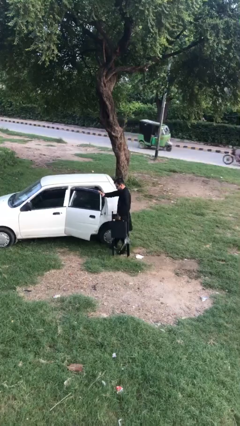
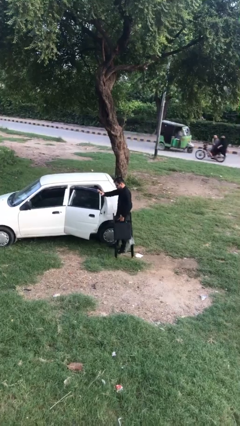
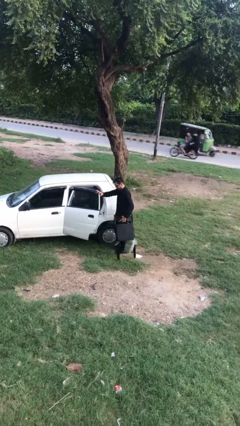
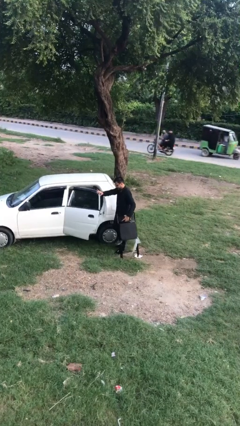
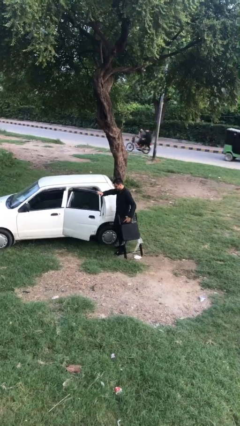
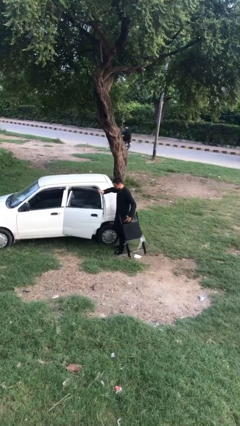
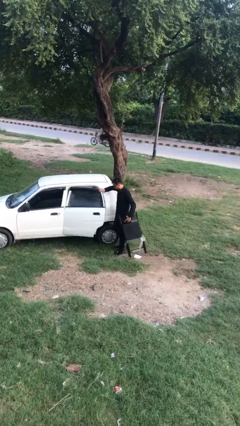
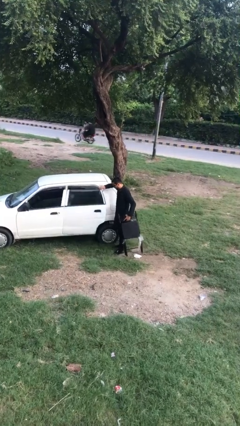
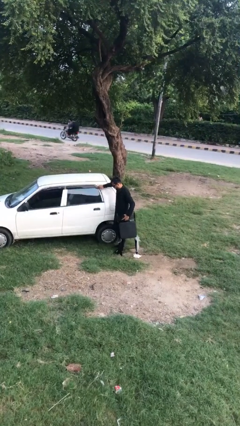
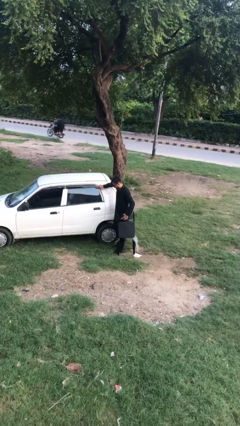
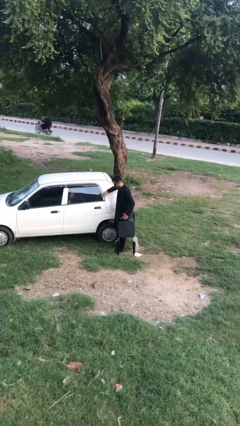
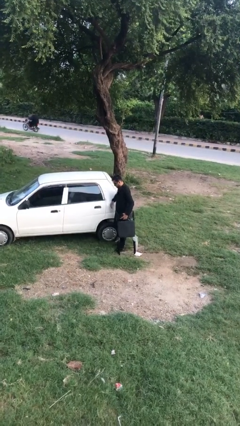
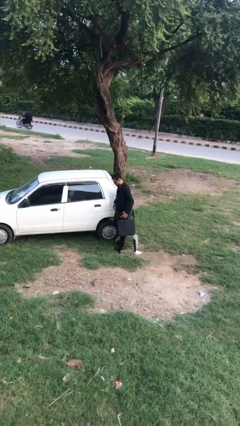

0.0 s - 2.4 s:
person closes car door

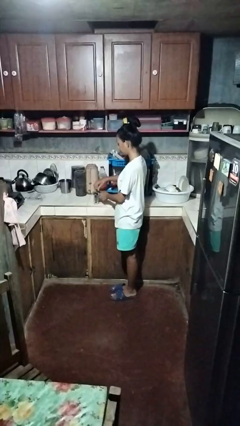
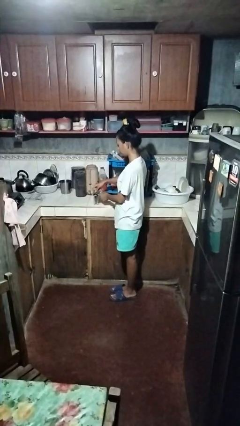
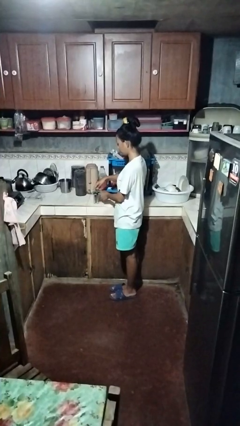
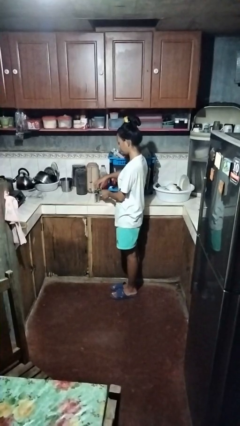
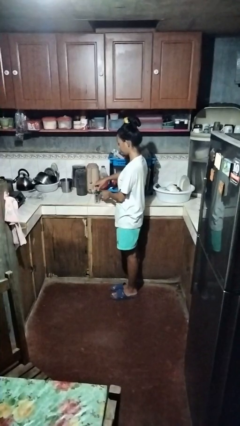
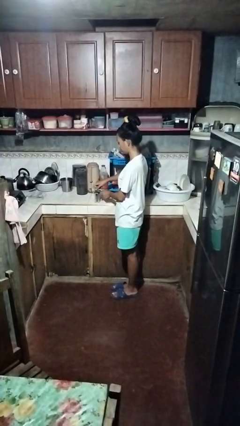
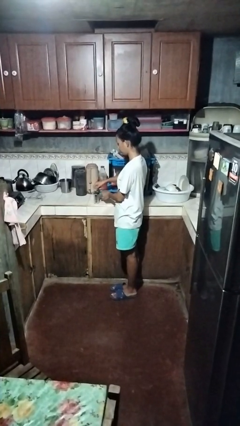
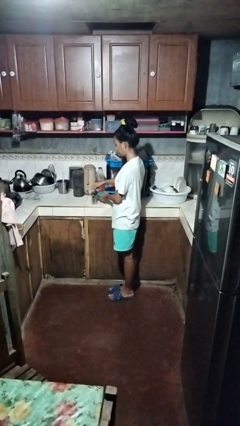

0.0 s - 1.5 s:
person opens can with can opener

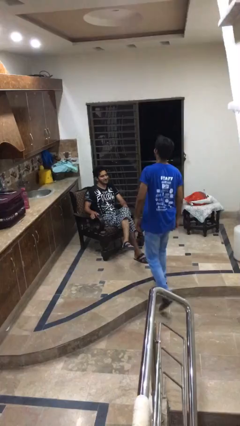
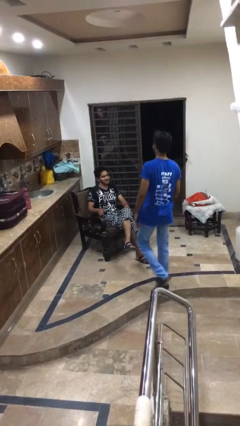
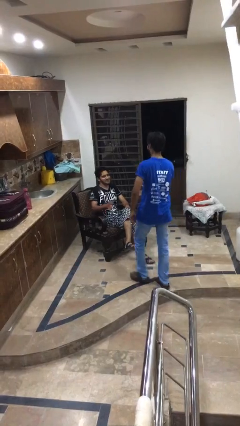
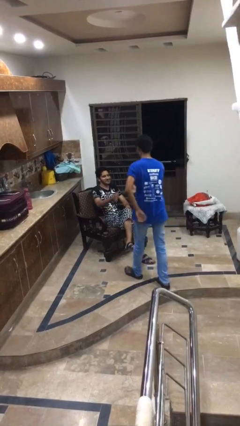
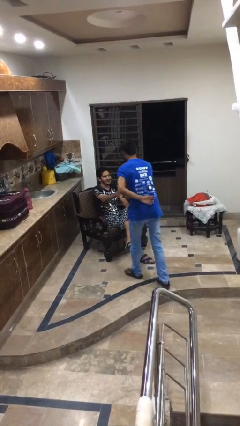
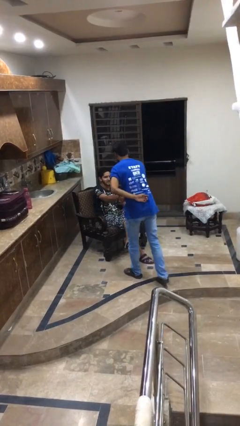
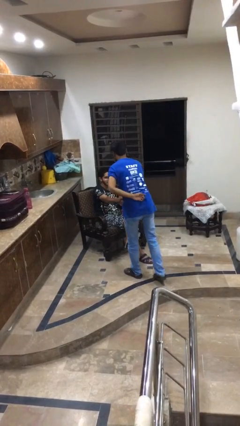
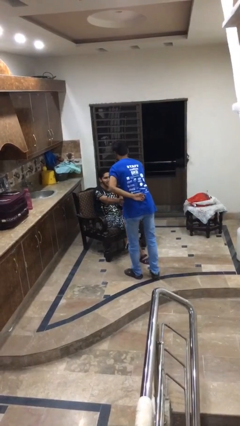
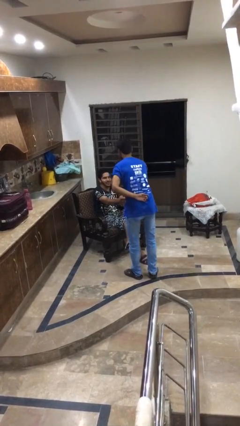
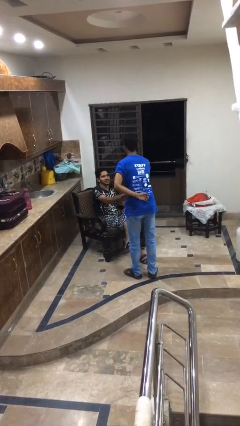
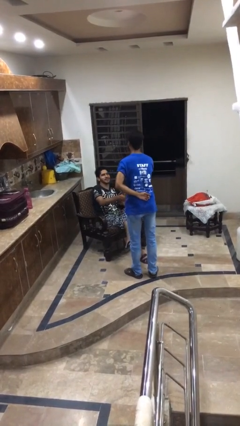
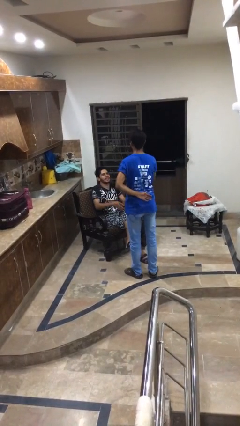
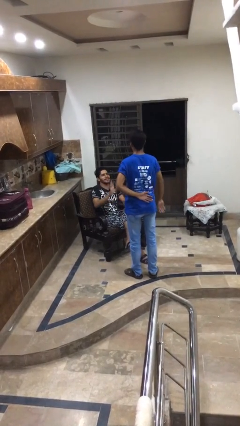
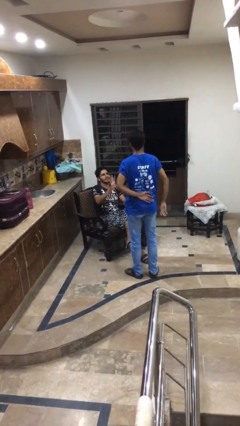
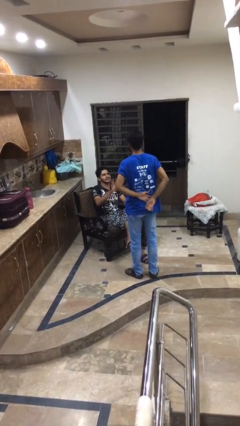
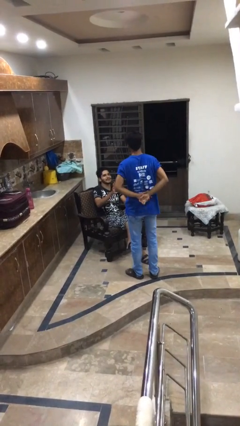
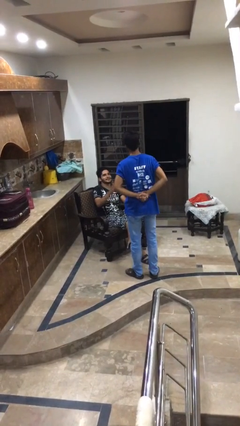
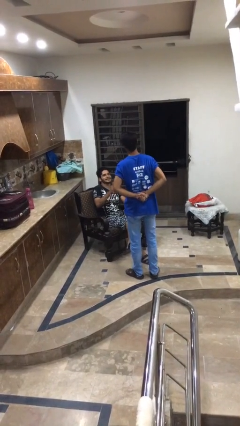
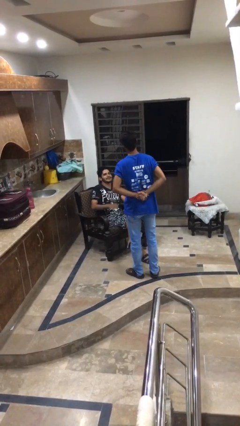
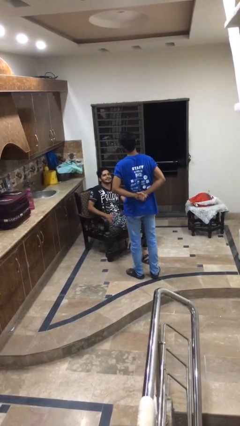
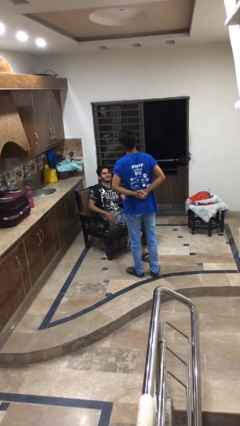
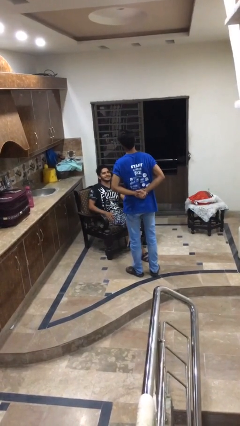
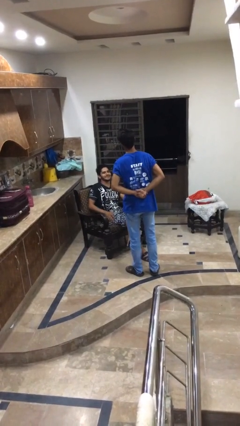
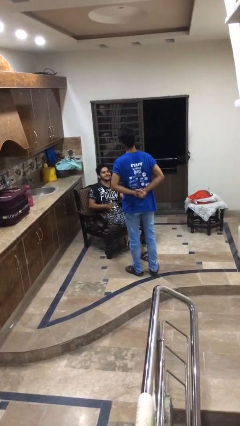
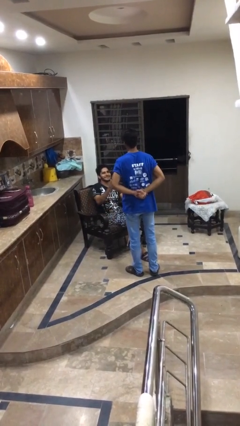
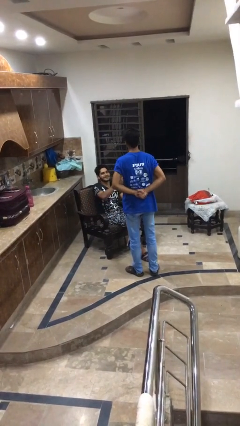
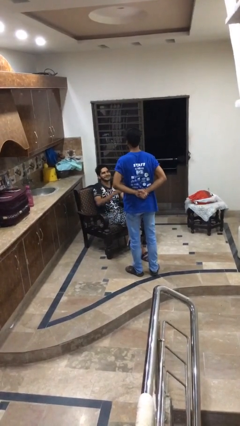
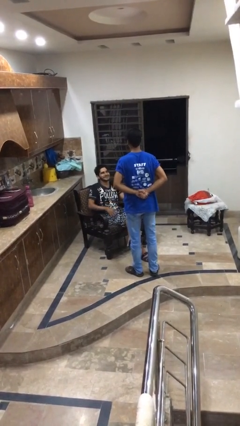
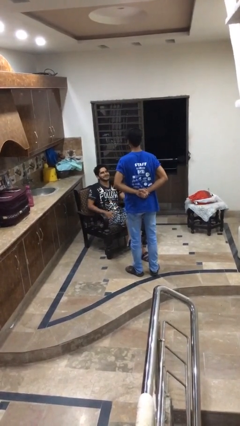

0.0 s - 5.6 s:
person shakes hand

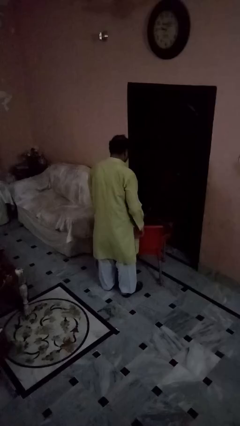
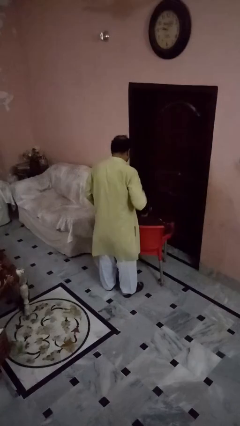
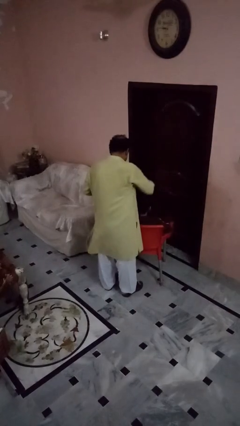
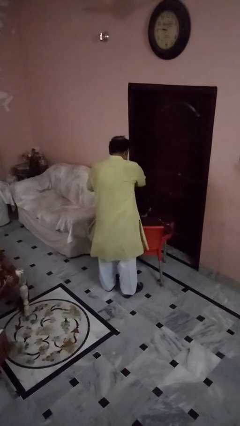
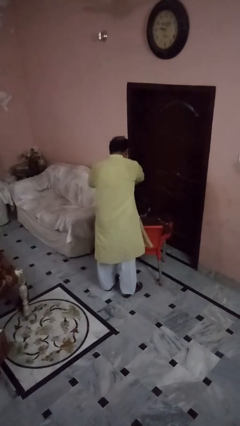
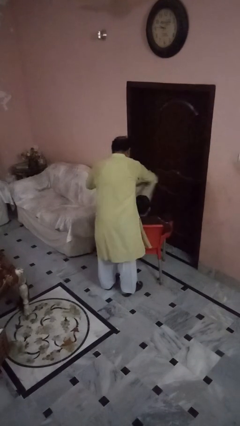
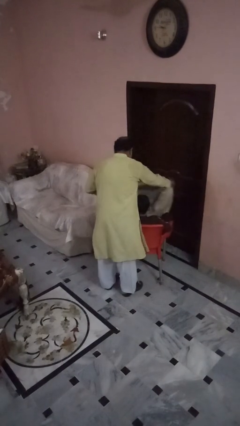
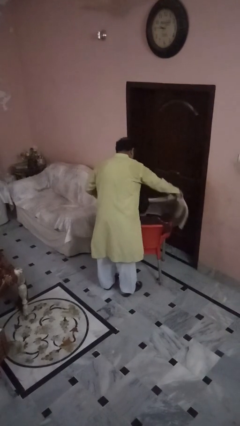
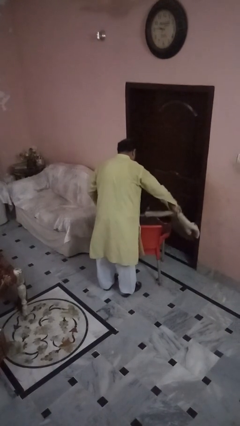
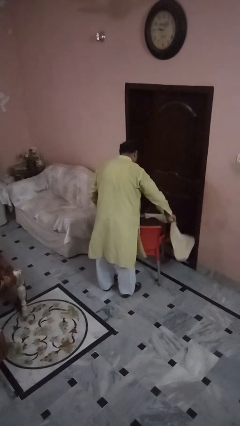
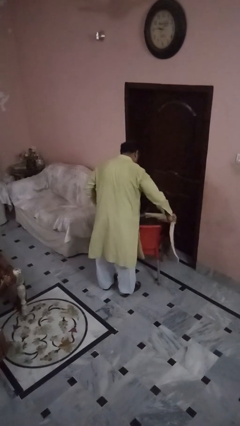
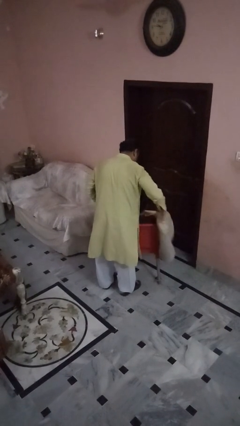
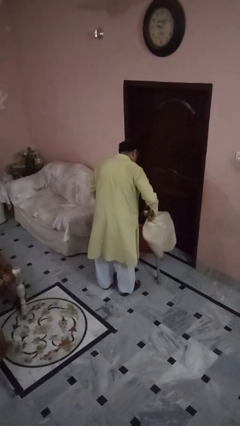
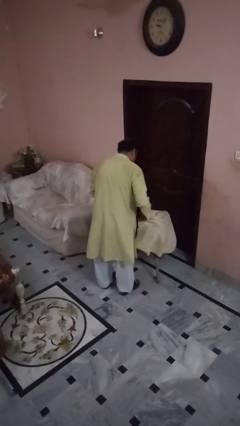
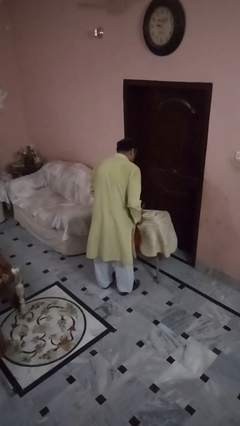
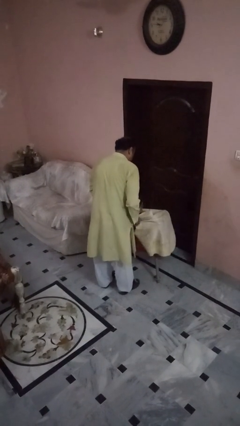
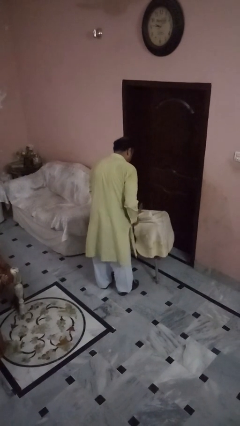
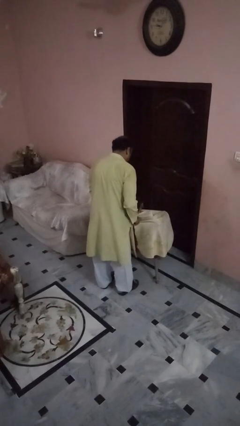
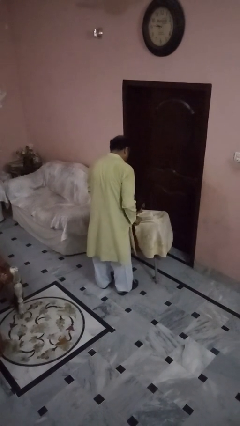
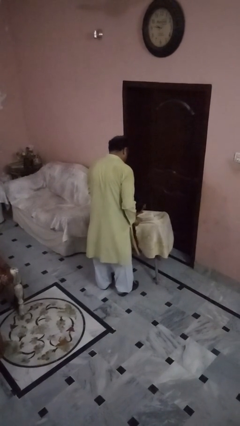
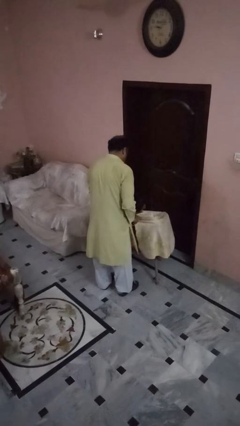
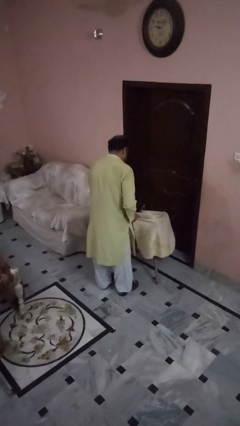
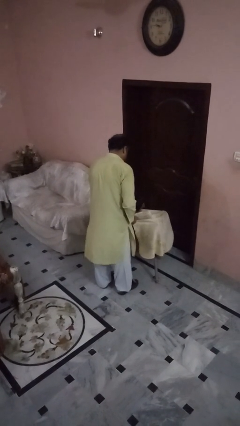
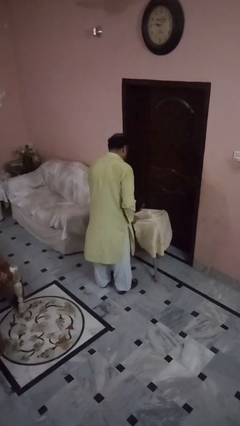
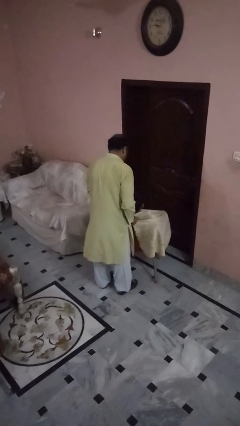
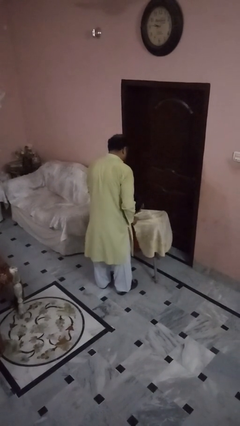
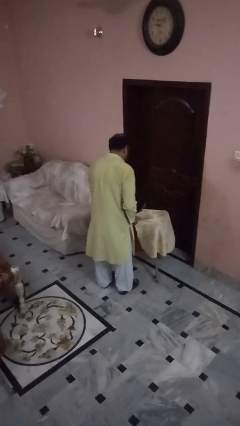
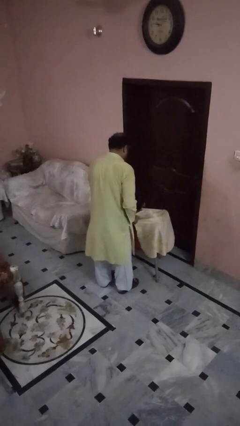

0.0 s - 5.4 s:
person covers friend with blanket

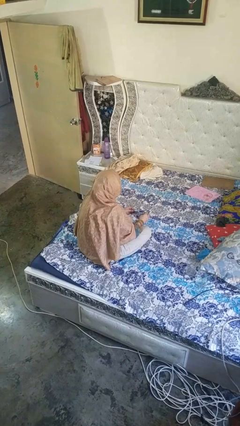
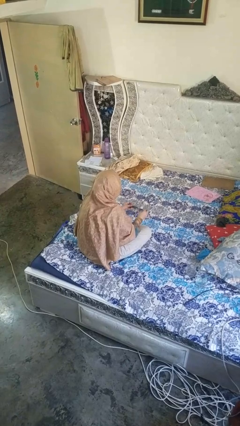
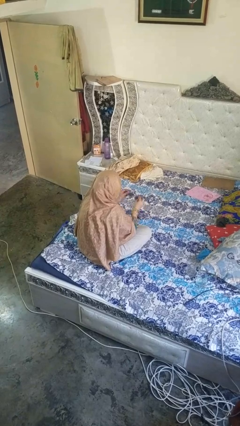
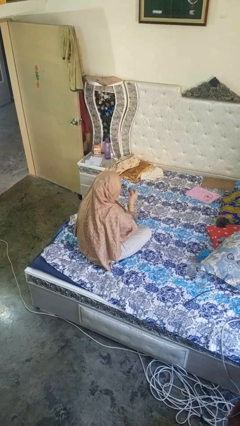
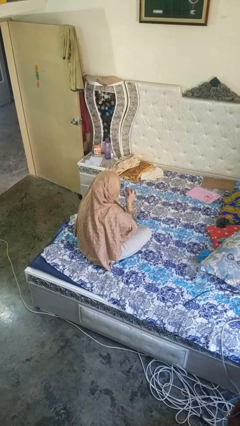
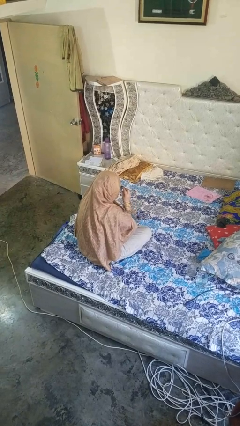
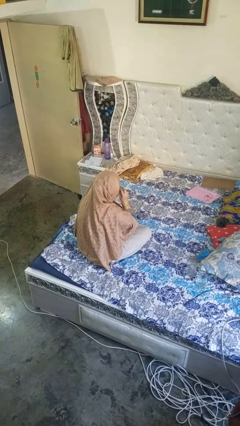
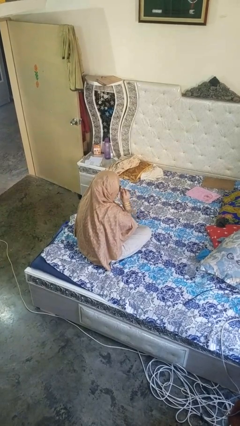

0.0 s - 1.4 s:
person puts on glasses

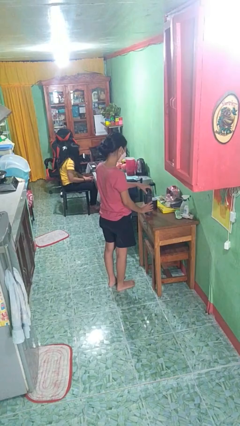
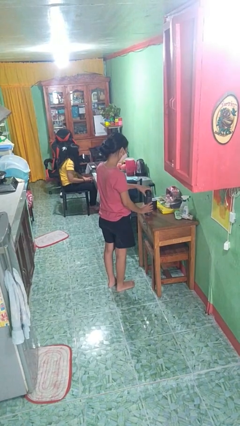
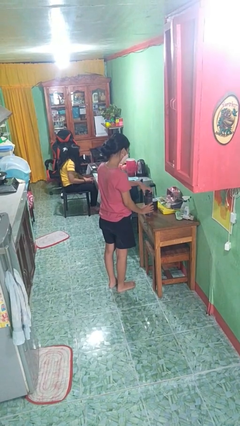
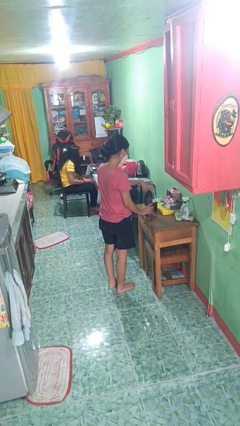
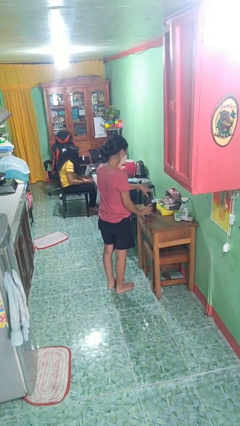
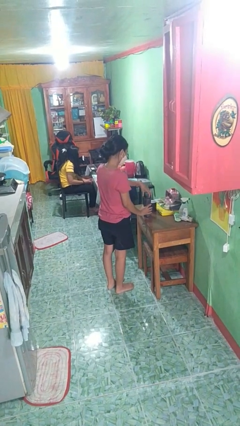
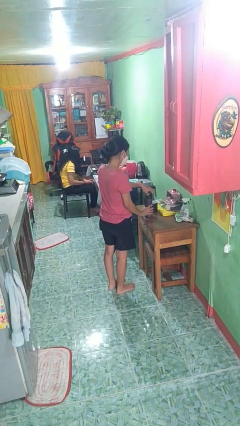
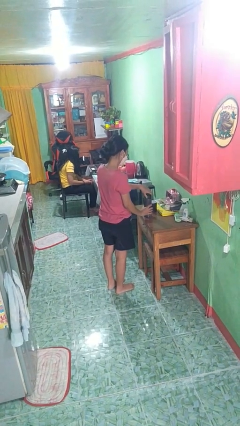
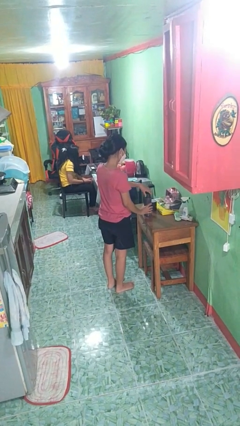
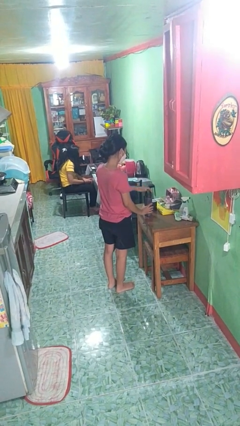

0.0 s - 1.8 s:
person screws lid to bottle
